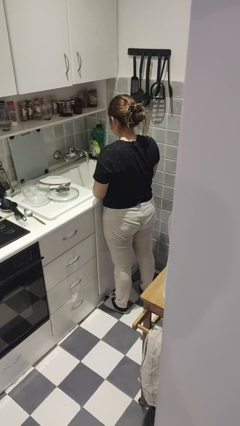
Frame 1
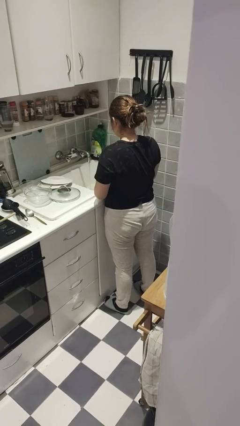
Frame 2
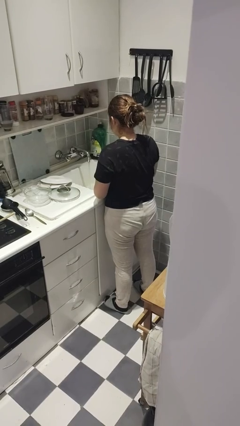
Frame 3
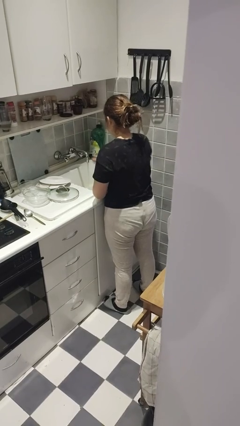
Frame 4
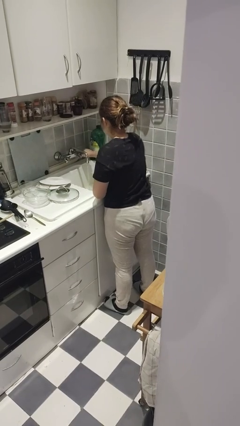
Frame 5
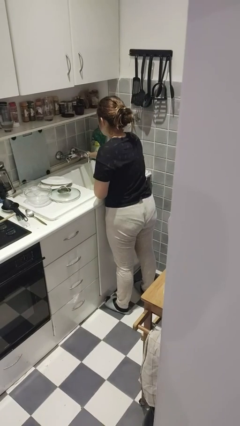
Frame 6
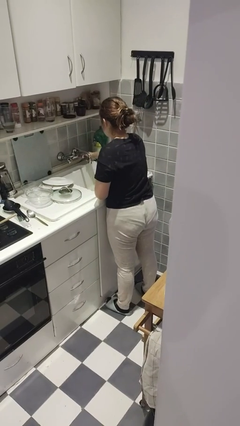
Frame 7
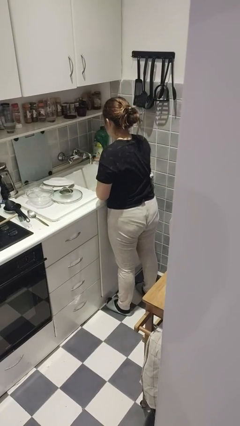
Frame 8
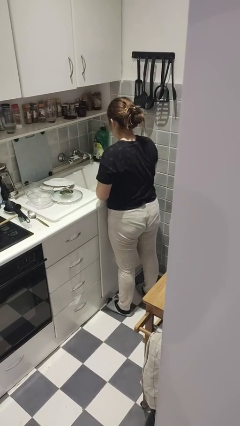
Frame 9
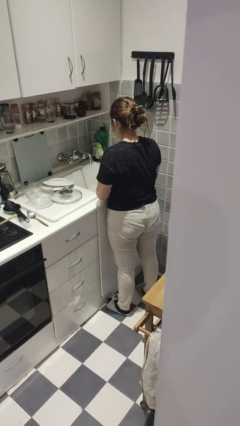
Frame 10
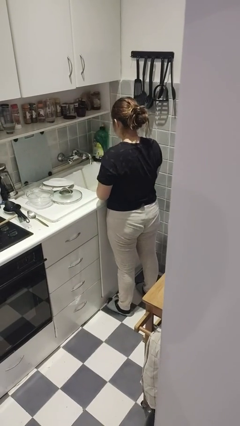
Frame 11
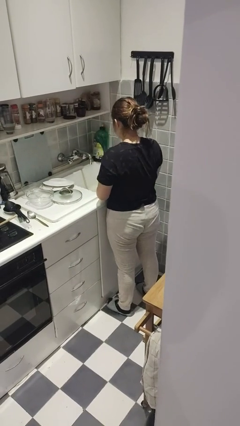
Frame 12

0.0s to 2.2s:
person turns off faucet

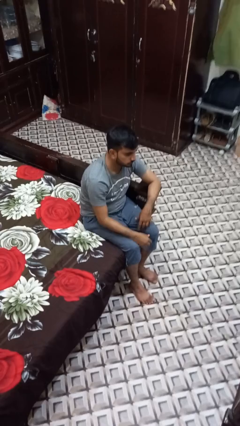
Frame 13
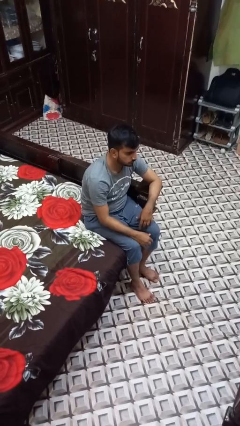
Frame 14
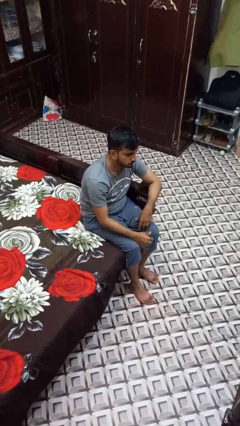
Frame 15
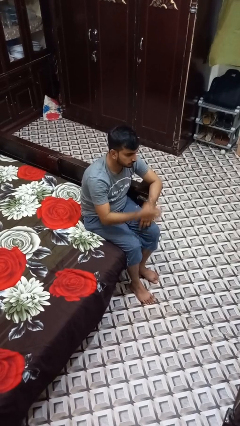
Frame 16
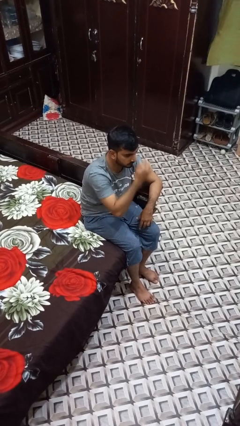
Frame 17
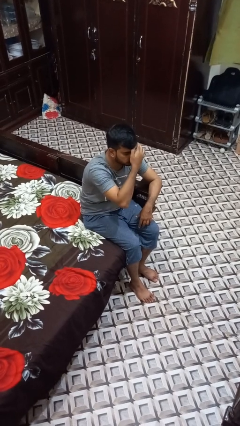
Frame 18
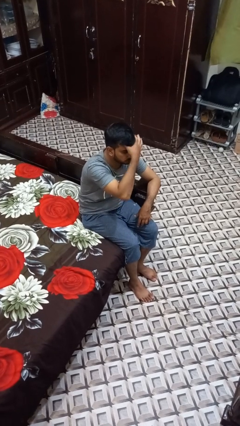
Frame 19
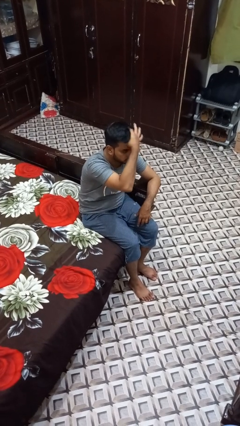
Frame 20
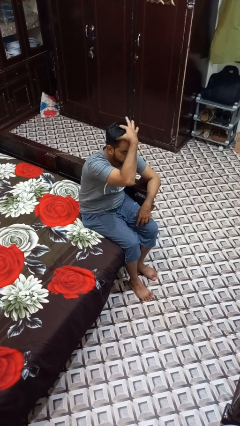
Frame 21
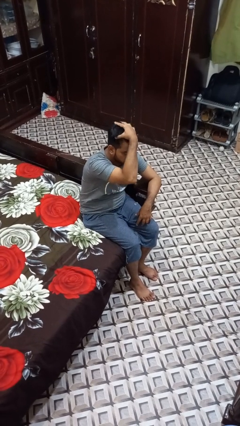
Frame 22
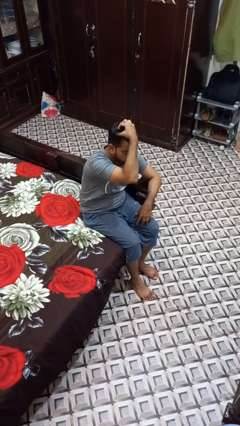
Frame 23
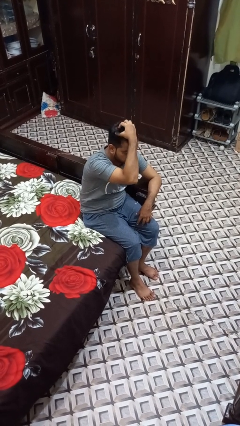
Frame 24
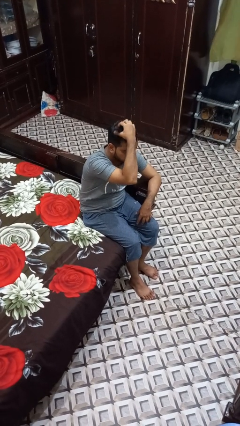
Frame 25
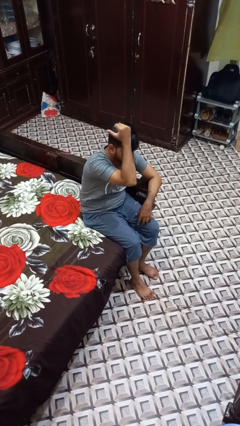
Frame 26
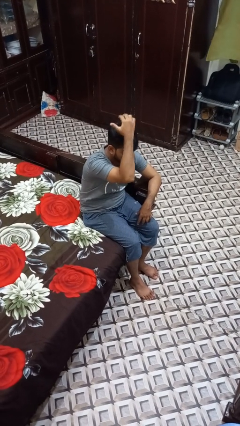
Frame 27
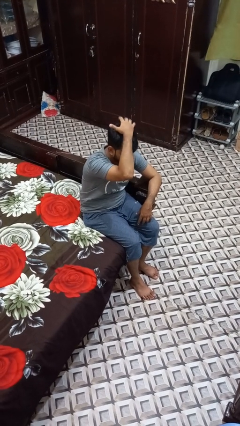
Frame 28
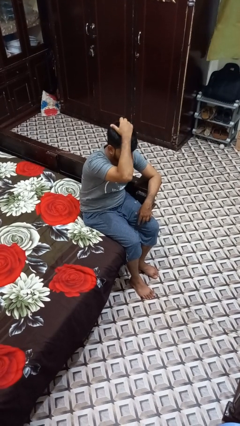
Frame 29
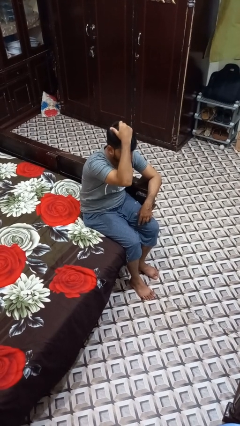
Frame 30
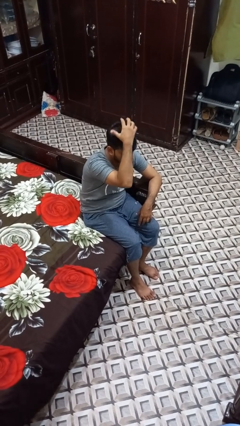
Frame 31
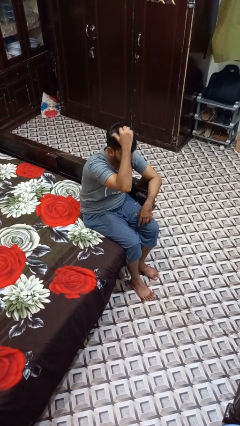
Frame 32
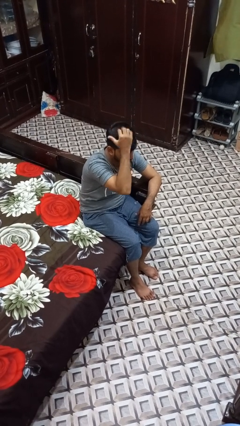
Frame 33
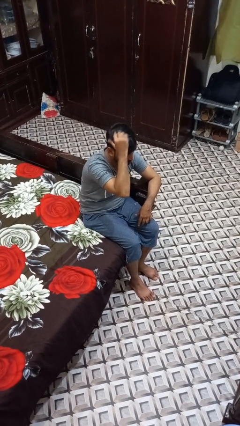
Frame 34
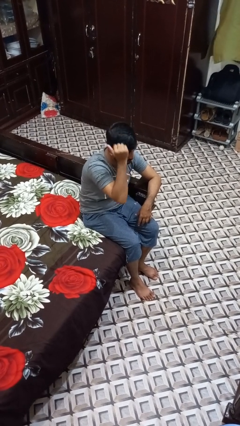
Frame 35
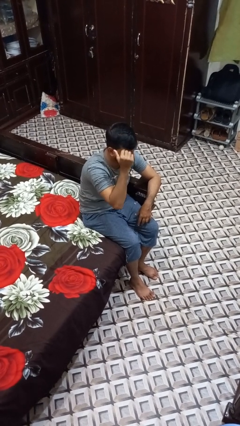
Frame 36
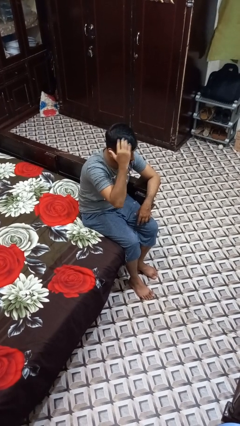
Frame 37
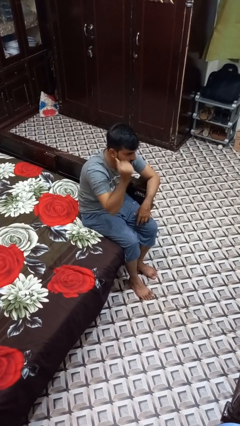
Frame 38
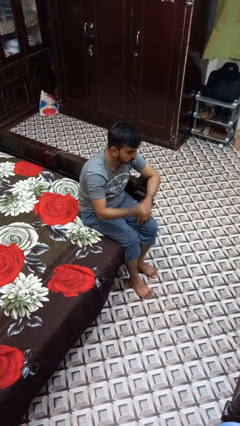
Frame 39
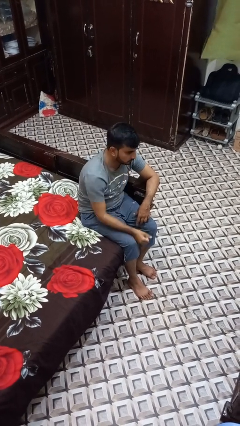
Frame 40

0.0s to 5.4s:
person strokes hair

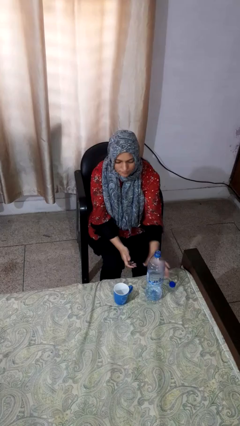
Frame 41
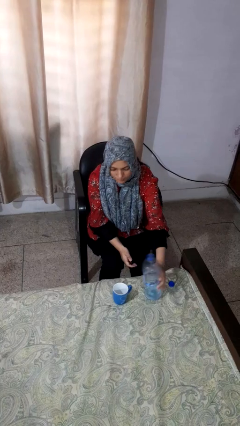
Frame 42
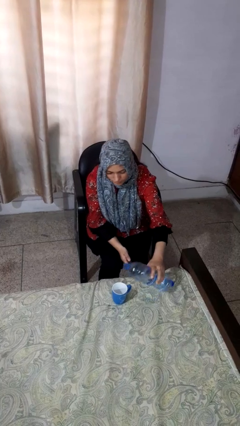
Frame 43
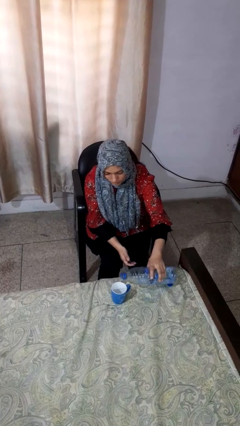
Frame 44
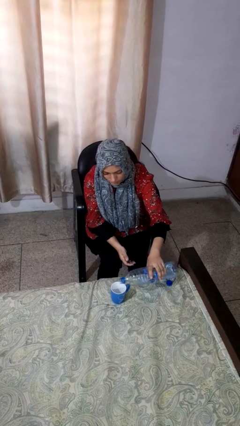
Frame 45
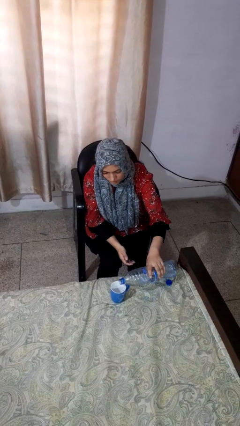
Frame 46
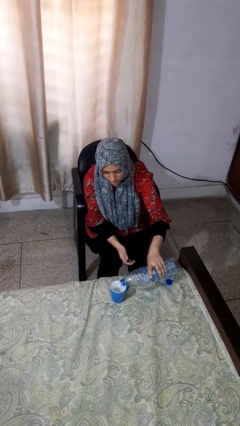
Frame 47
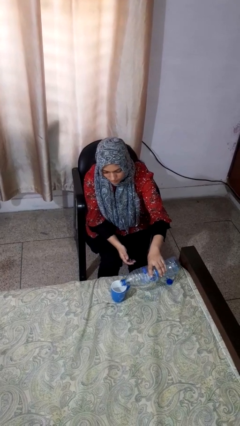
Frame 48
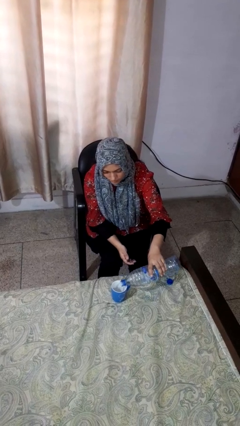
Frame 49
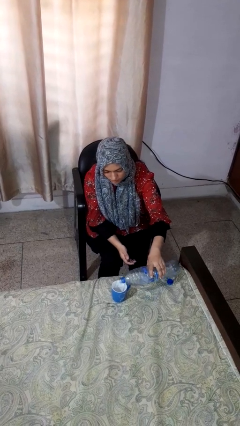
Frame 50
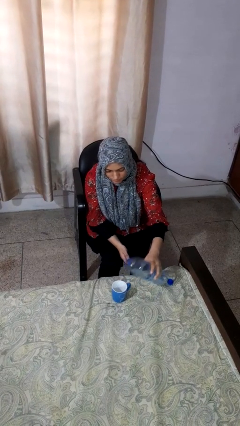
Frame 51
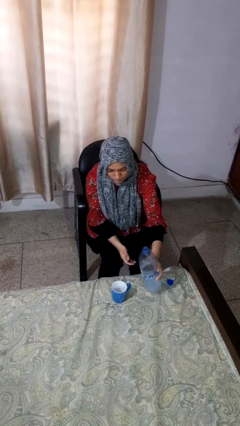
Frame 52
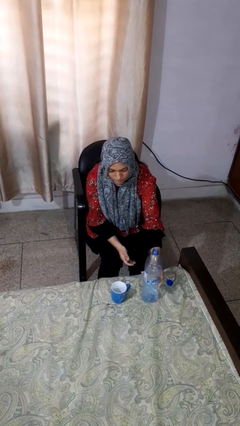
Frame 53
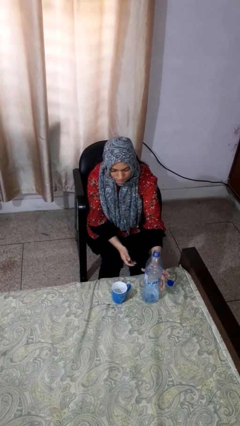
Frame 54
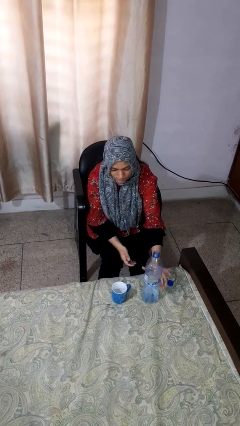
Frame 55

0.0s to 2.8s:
person pours liquid into cup

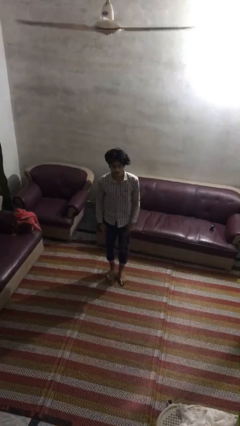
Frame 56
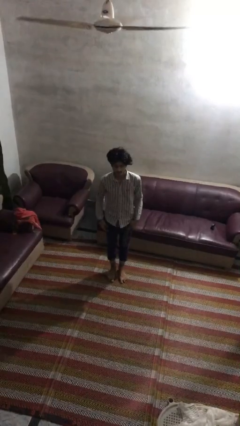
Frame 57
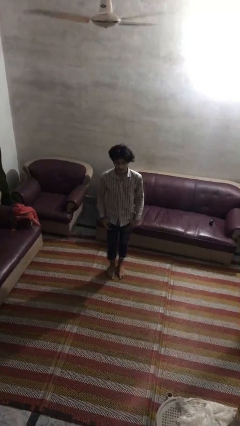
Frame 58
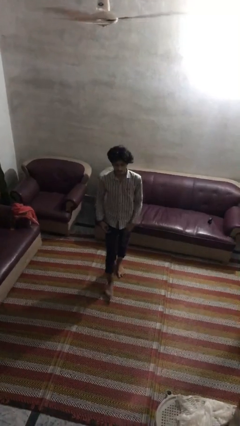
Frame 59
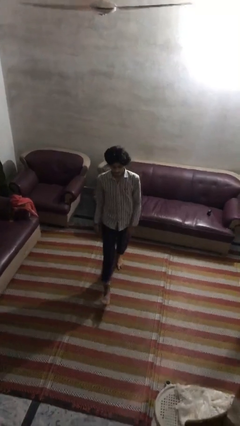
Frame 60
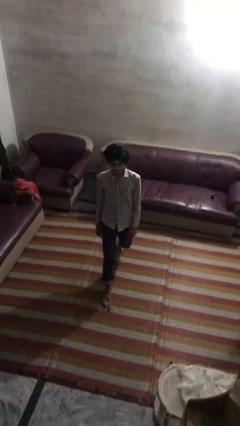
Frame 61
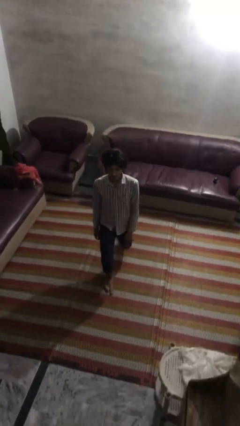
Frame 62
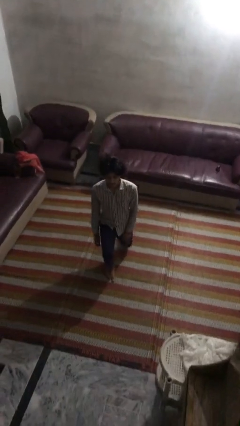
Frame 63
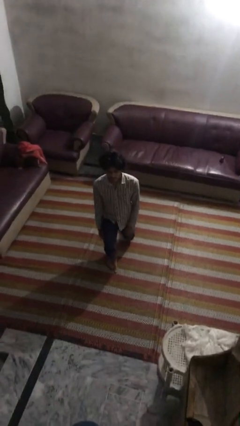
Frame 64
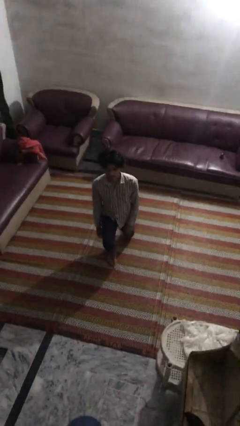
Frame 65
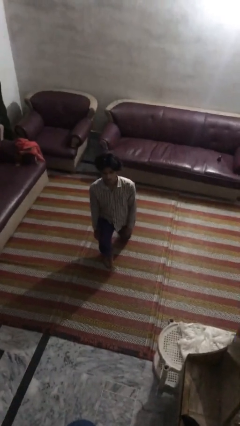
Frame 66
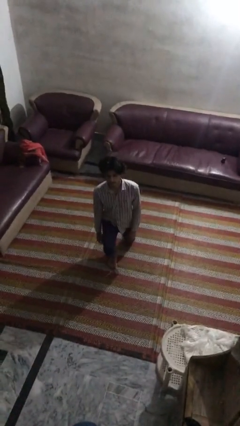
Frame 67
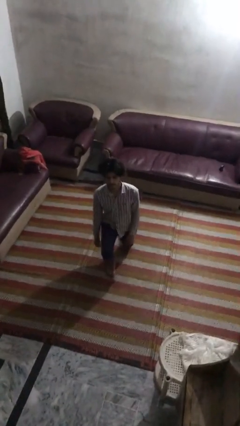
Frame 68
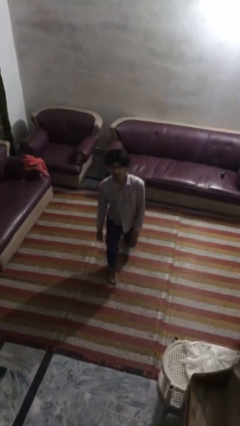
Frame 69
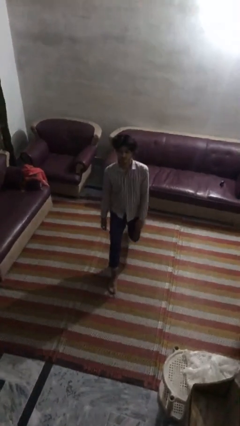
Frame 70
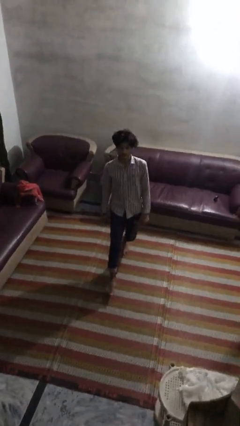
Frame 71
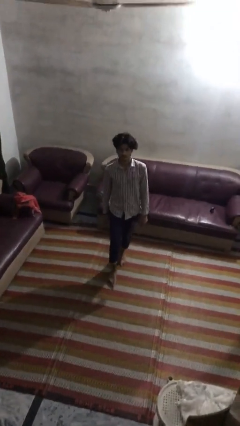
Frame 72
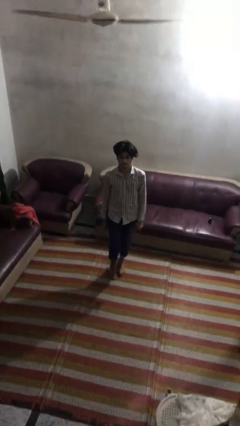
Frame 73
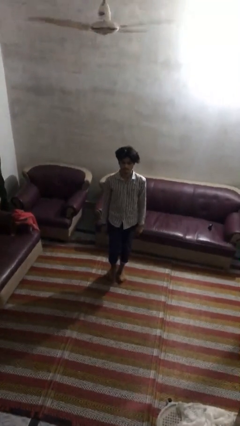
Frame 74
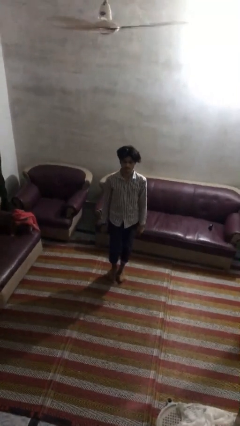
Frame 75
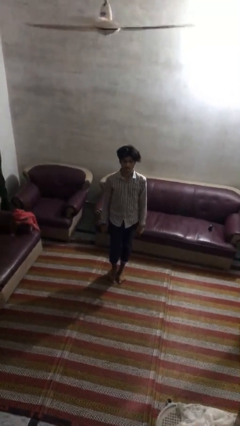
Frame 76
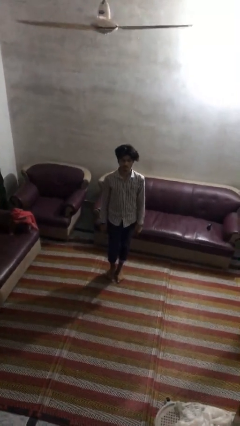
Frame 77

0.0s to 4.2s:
person exercises with lunges

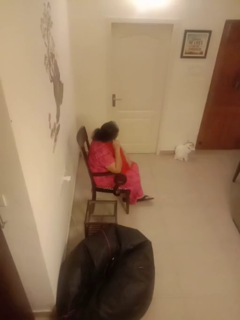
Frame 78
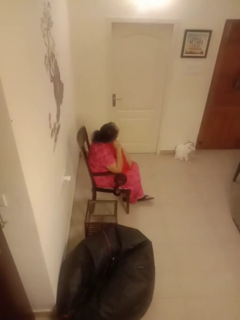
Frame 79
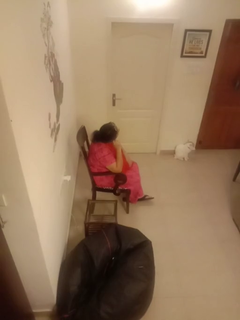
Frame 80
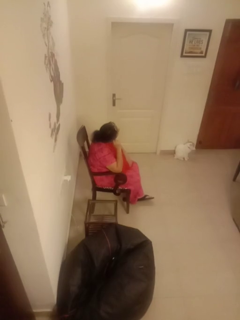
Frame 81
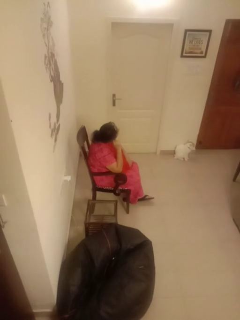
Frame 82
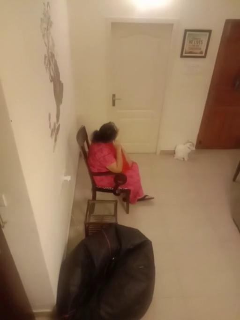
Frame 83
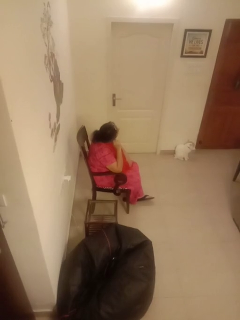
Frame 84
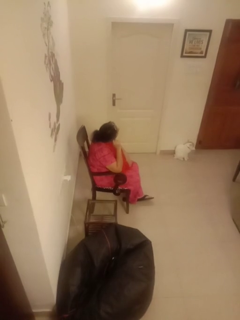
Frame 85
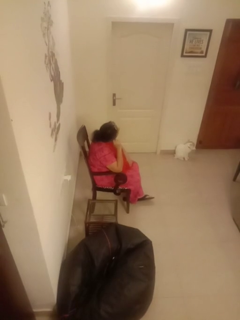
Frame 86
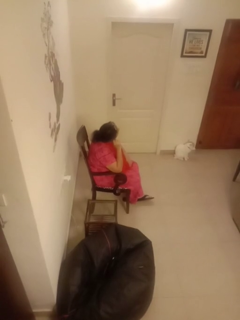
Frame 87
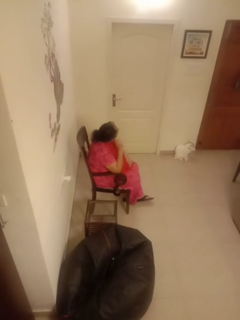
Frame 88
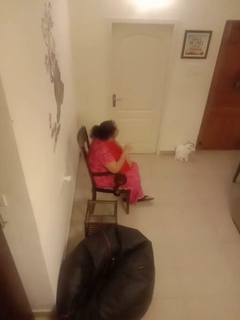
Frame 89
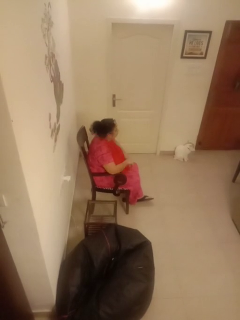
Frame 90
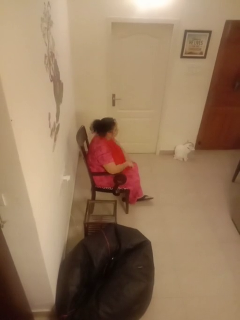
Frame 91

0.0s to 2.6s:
person touches earlobe

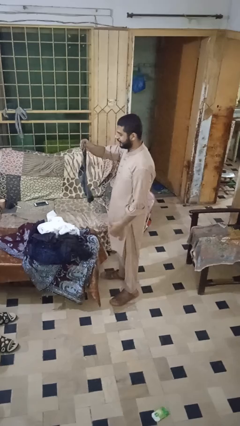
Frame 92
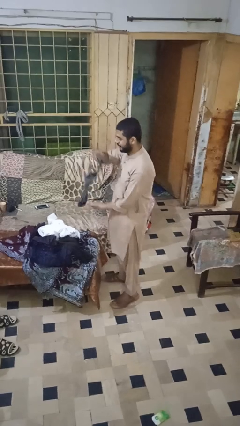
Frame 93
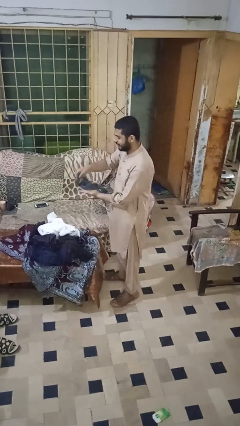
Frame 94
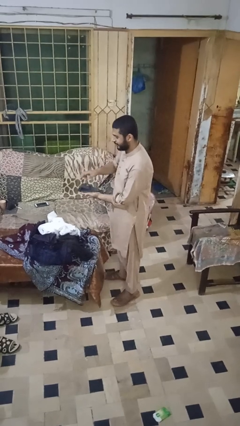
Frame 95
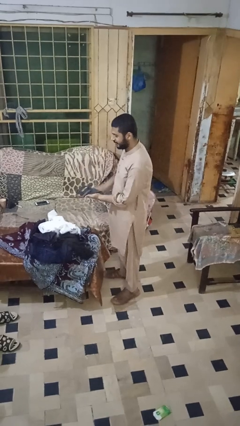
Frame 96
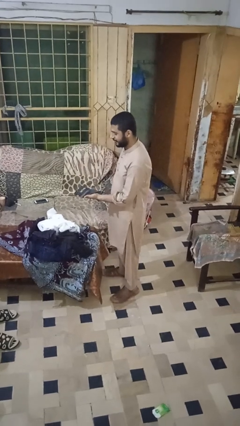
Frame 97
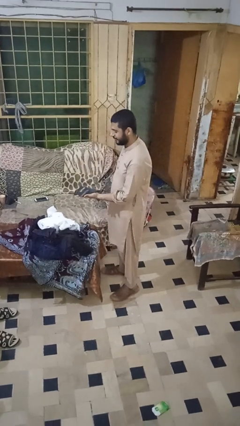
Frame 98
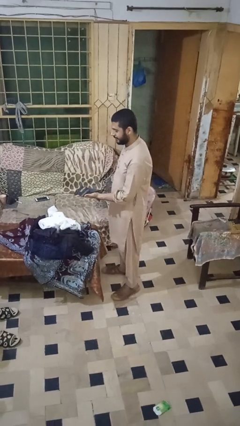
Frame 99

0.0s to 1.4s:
person folds socks
